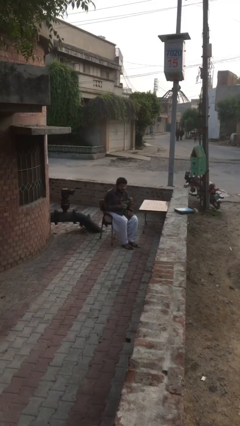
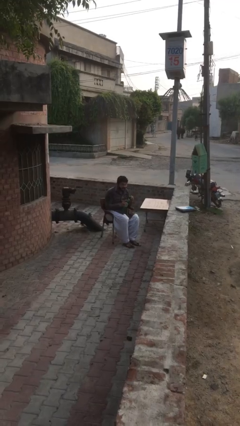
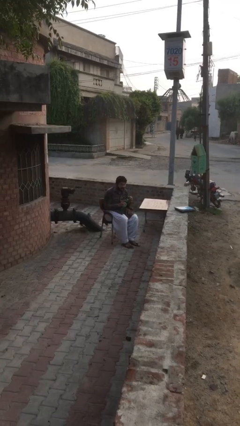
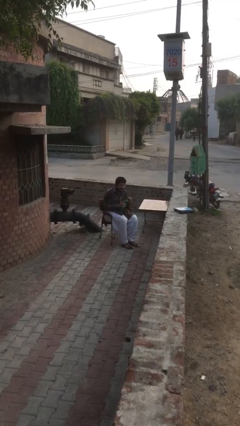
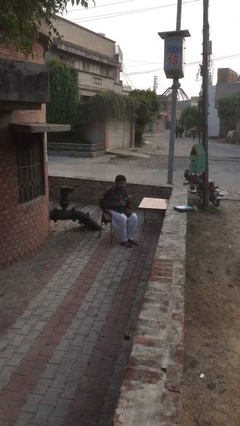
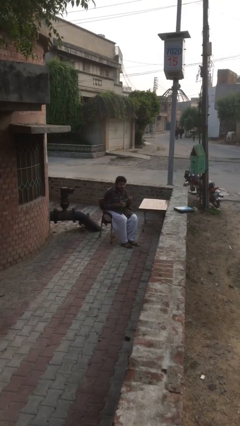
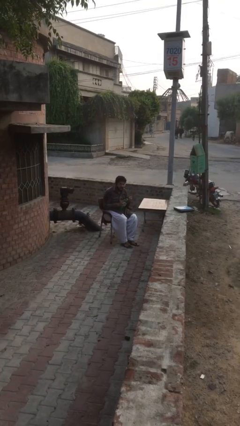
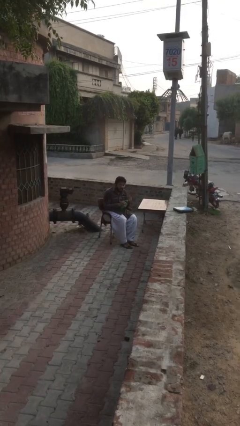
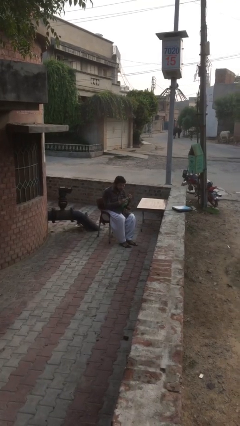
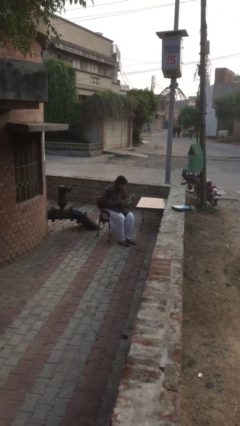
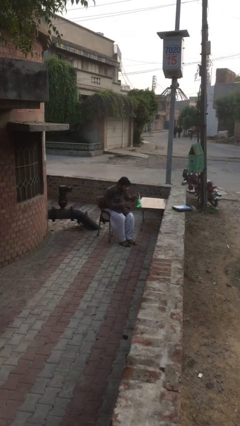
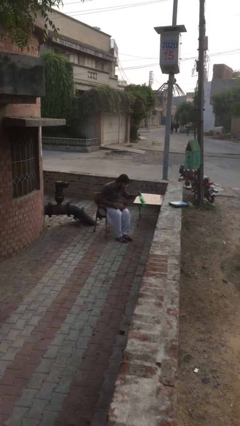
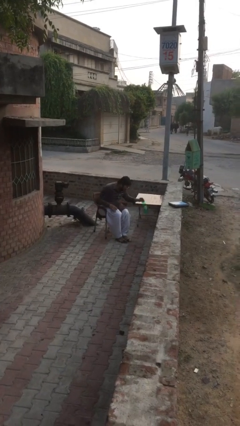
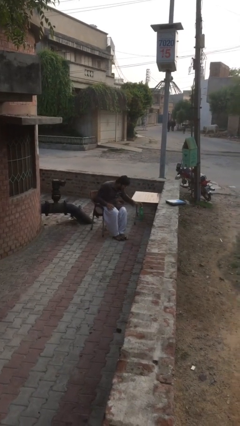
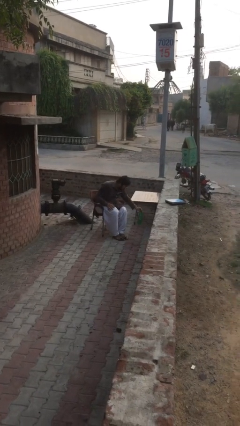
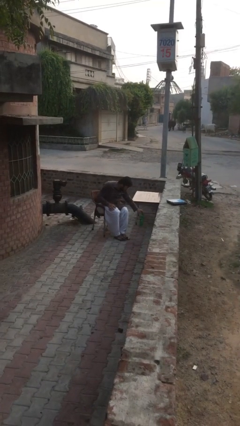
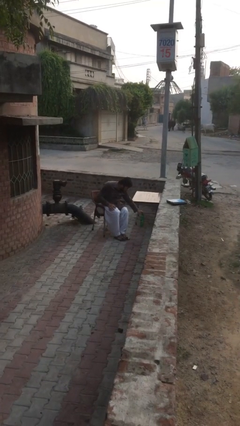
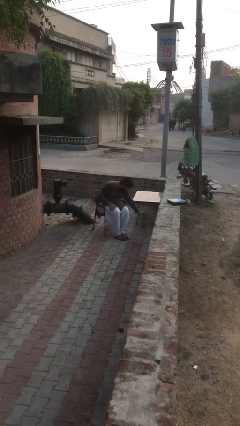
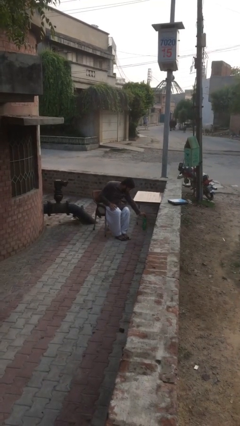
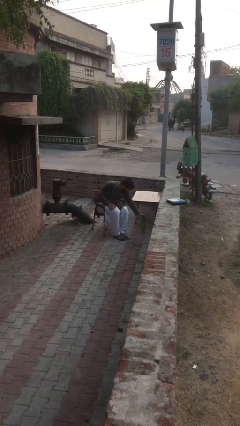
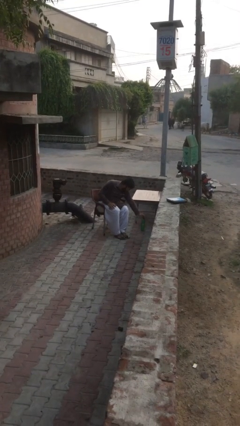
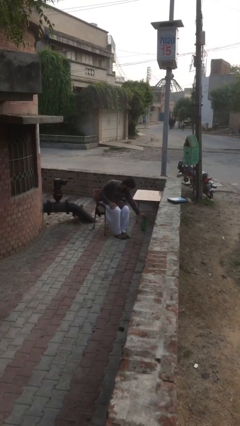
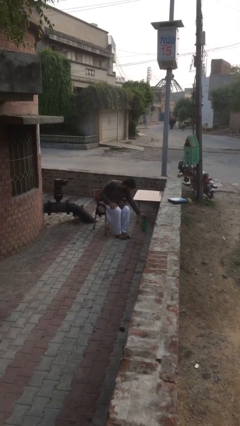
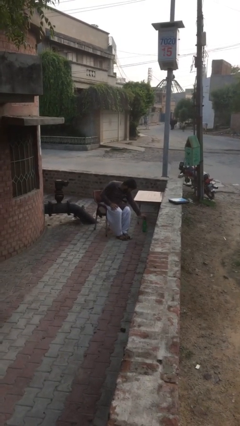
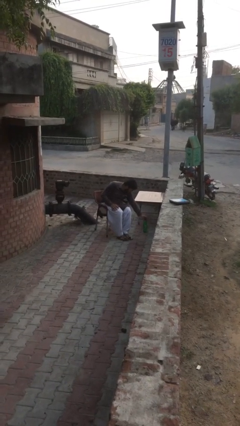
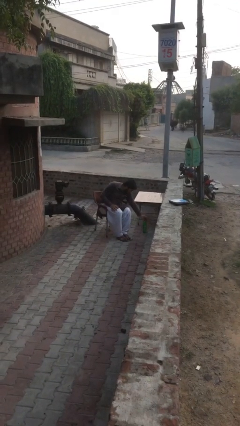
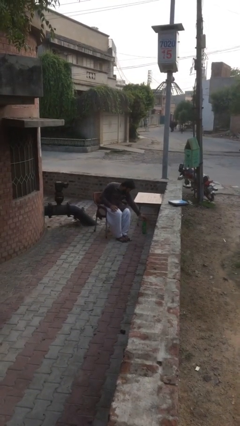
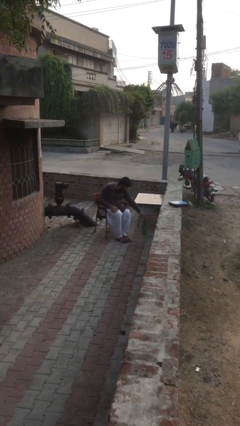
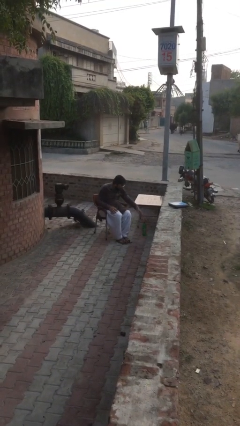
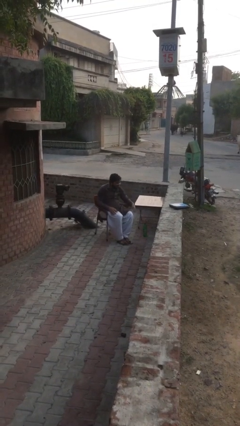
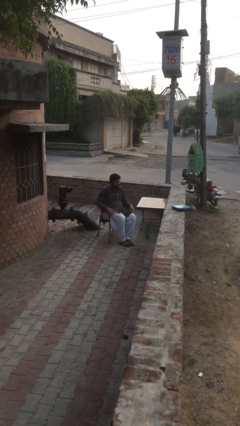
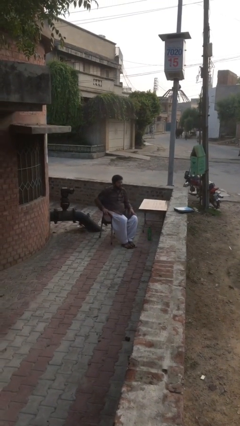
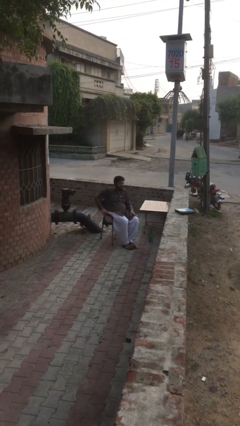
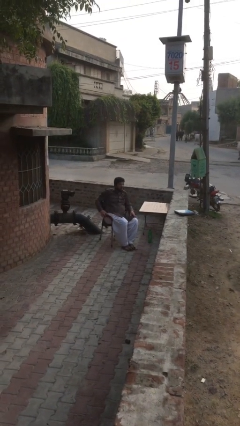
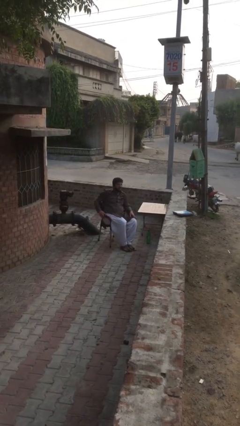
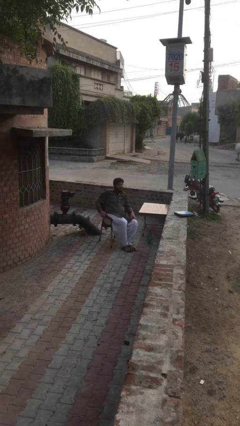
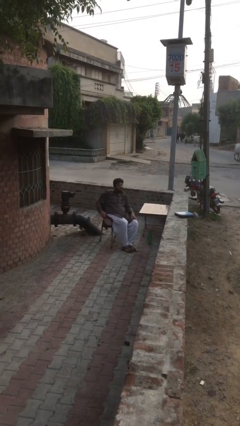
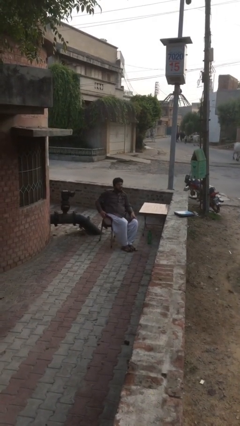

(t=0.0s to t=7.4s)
person puts down object on floor

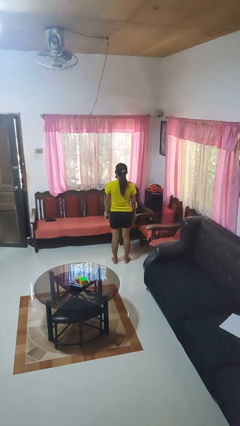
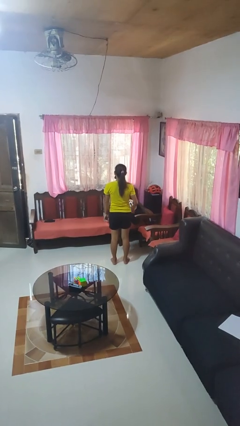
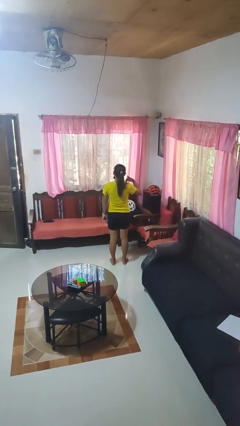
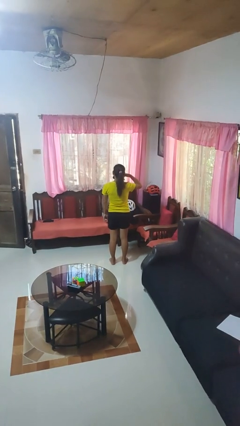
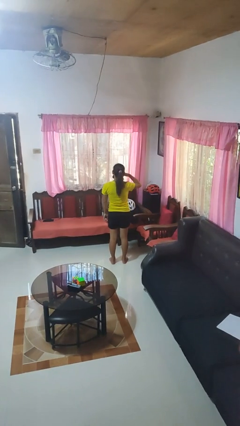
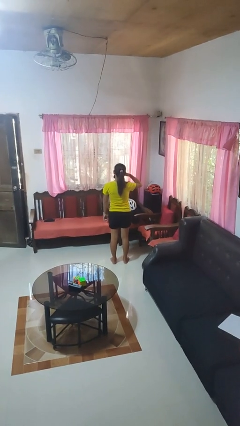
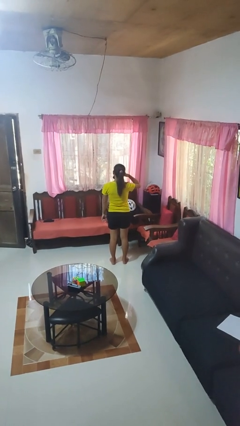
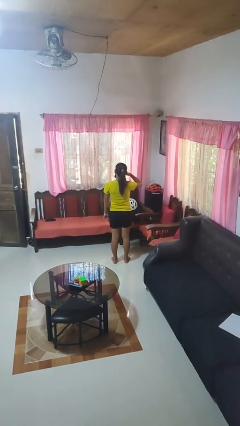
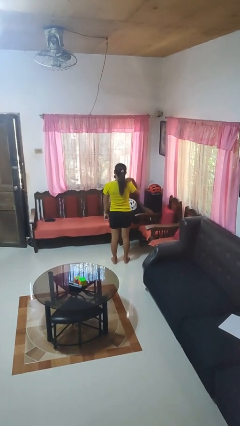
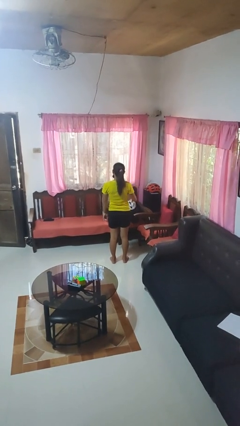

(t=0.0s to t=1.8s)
person gestures call me

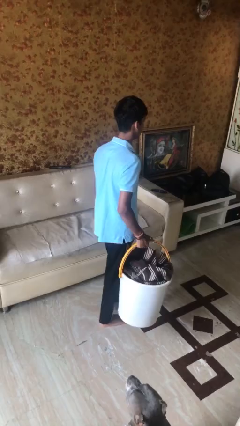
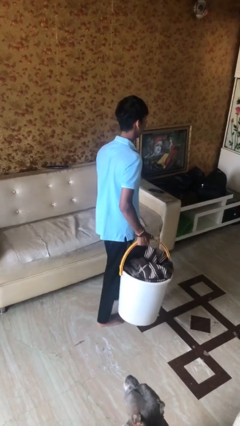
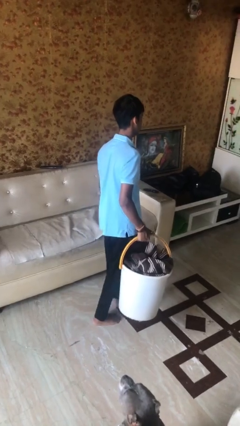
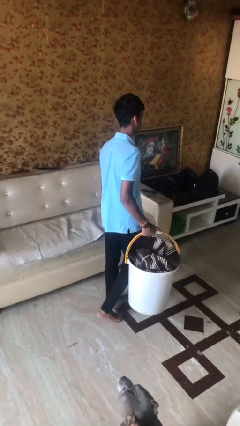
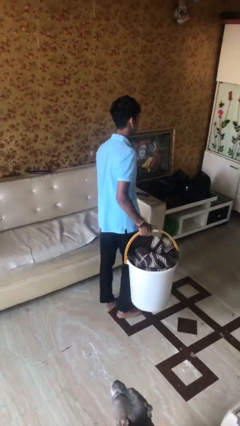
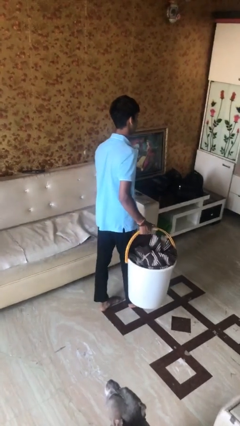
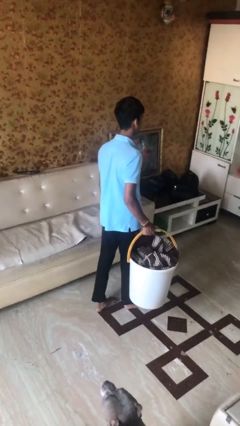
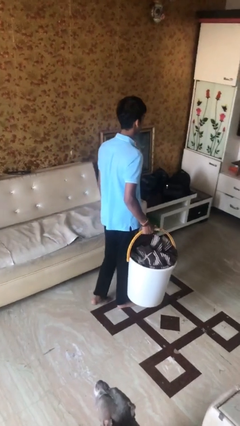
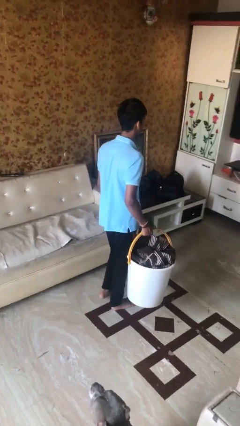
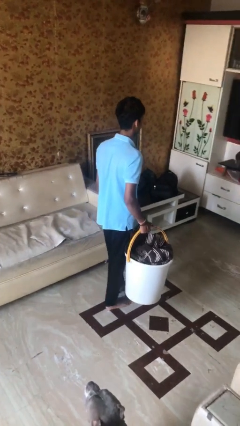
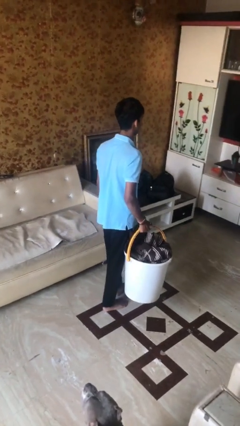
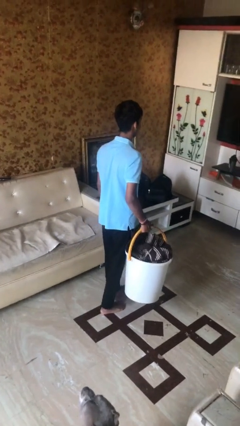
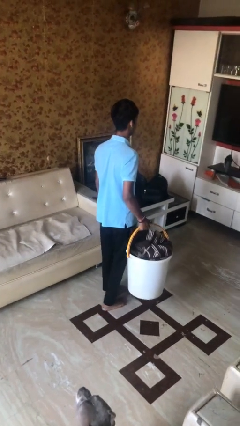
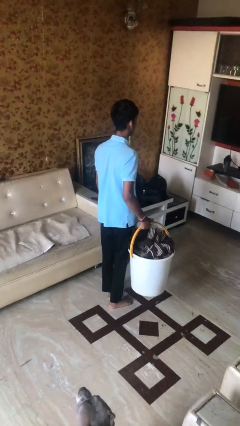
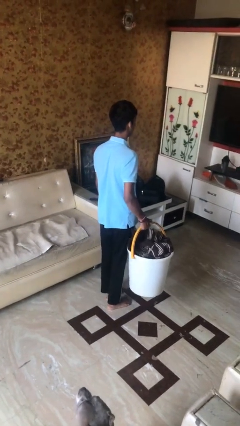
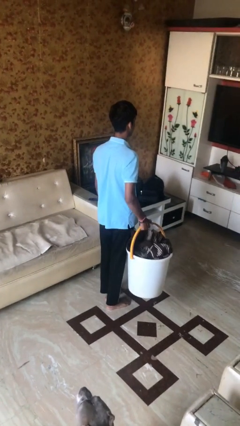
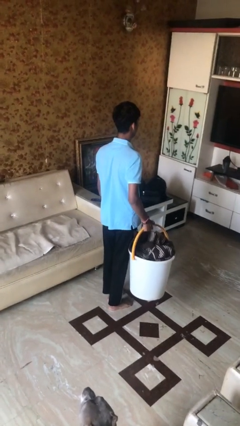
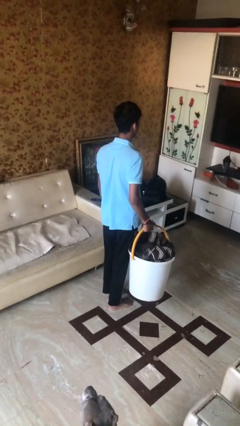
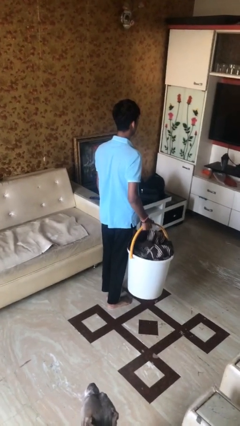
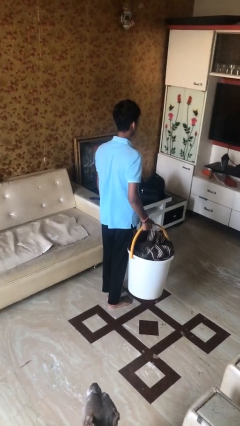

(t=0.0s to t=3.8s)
person carries laundry basket

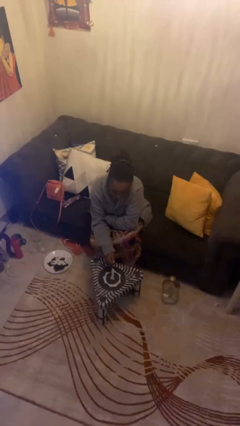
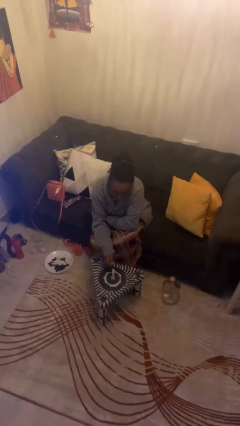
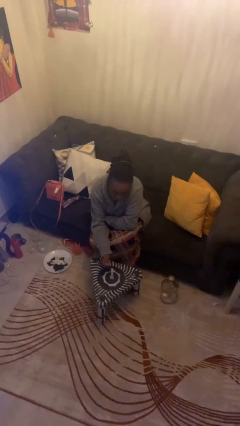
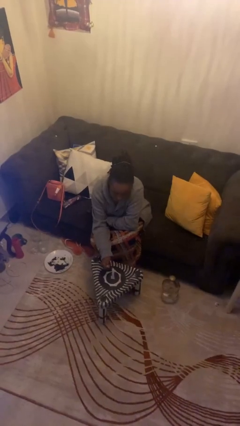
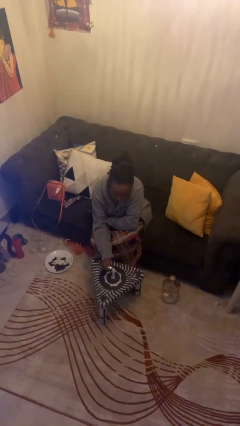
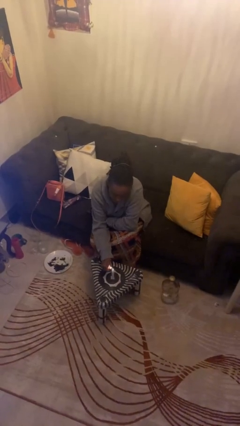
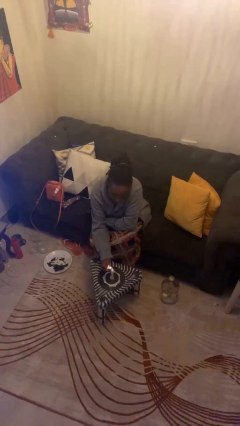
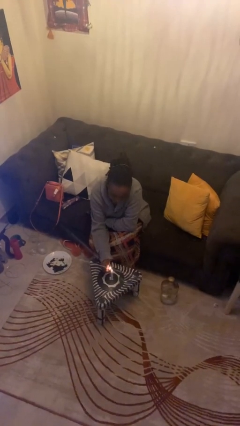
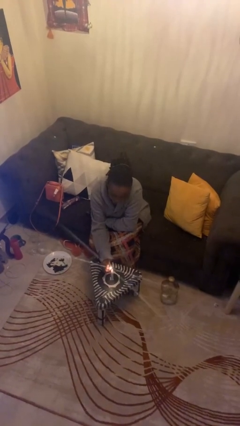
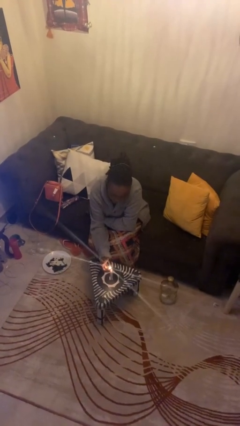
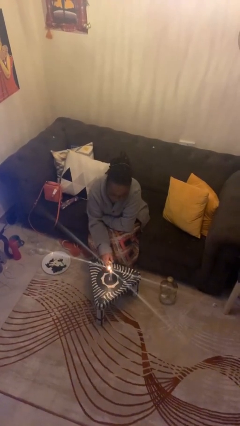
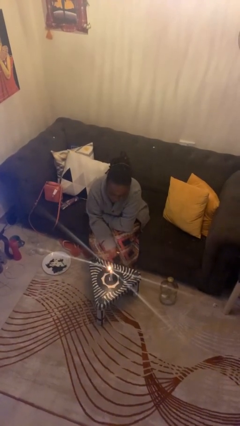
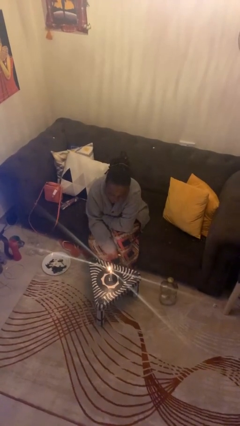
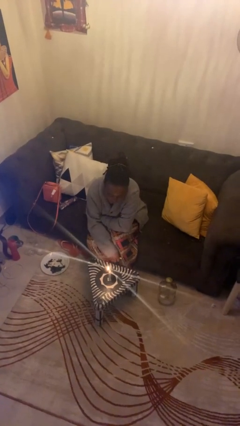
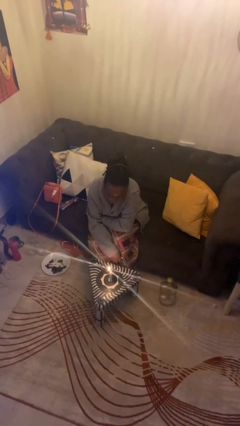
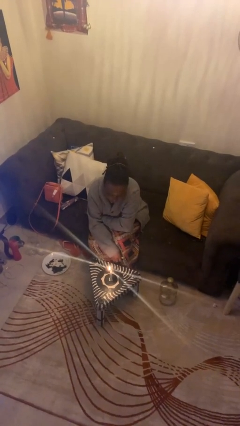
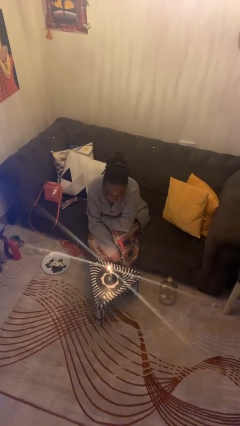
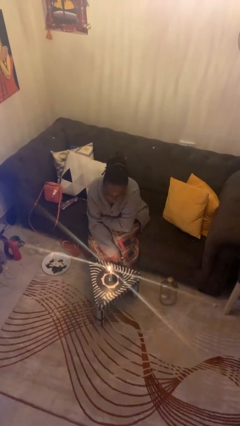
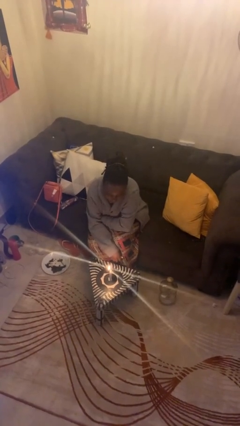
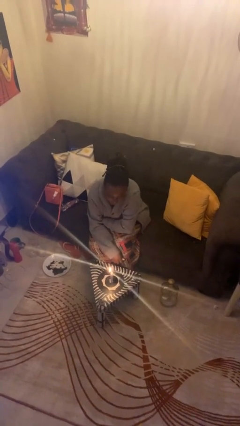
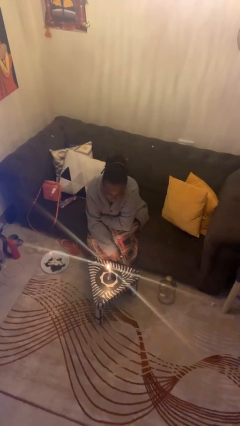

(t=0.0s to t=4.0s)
person lights candle

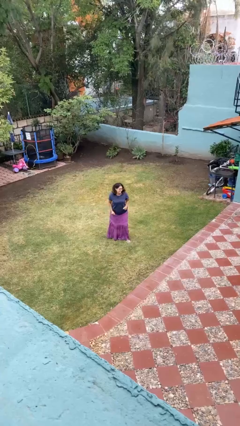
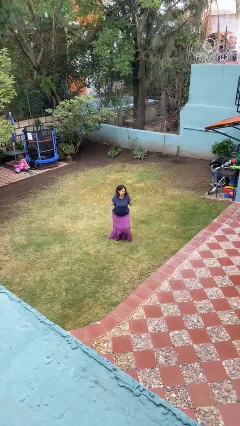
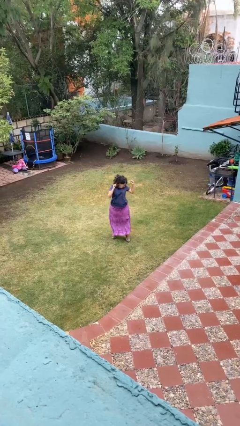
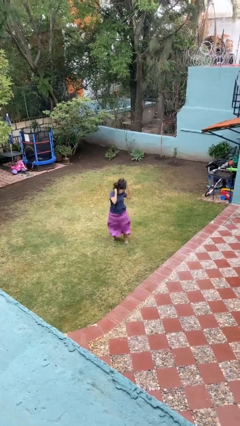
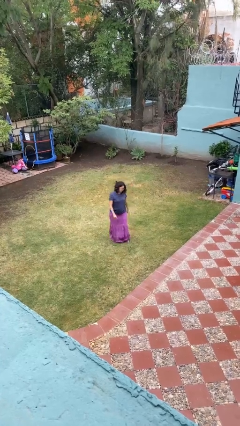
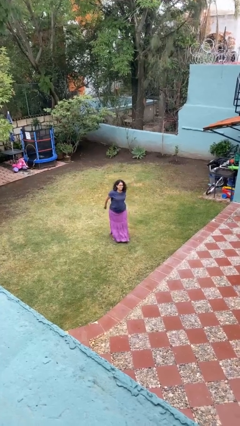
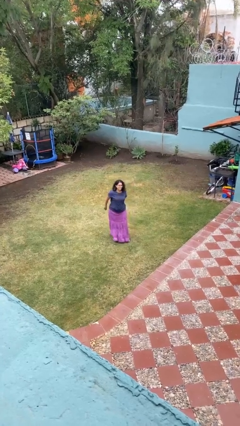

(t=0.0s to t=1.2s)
person jumps
